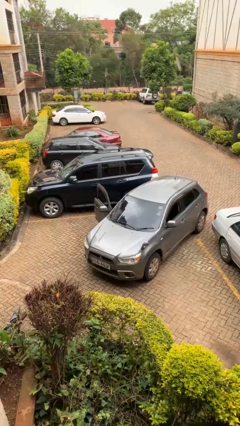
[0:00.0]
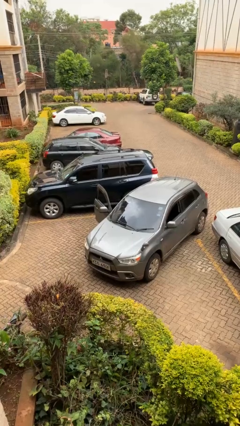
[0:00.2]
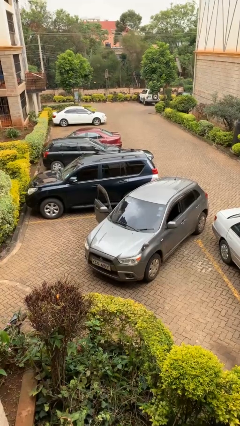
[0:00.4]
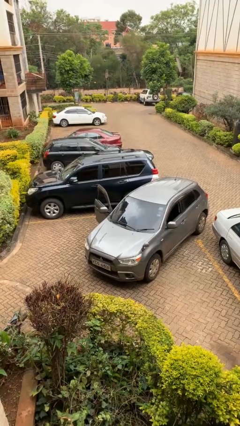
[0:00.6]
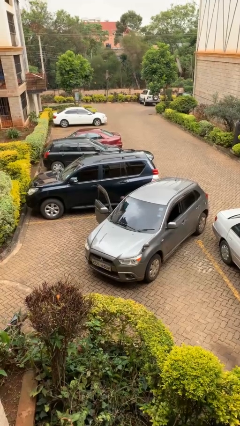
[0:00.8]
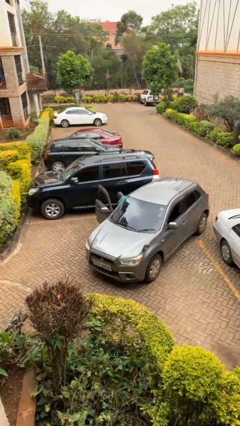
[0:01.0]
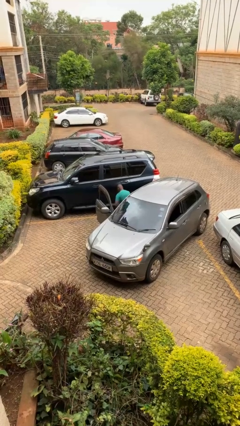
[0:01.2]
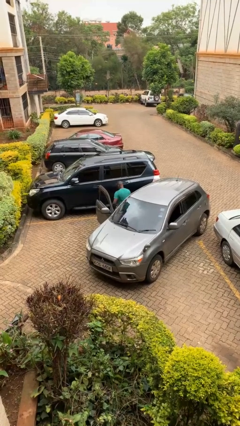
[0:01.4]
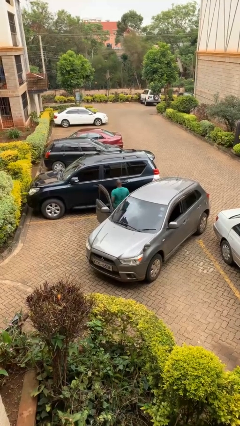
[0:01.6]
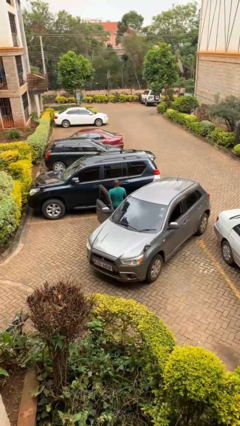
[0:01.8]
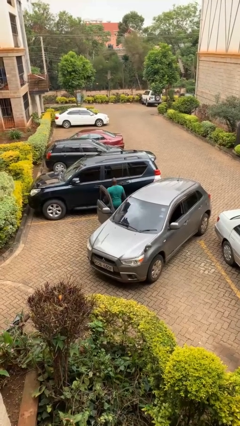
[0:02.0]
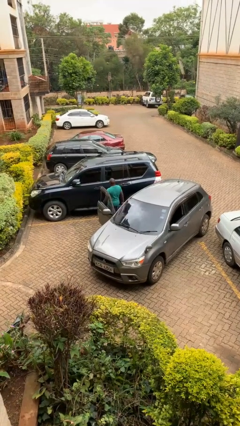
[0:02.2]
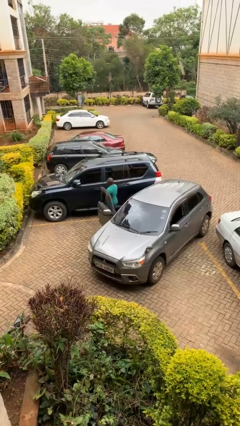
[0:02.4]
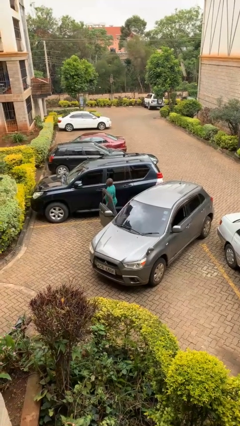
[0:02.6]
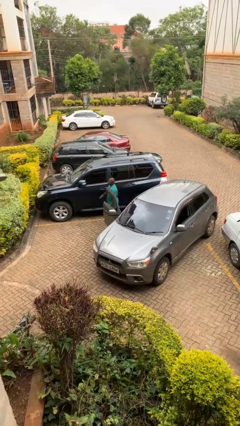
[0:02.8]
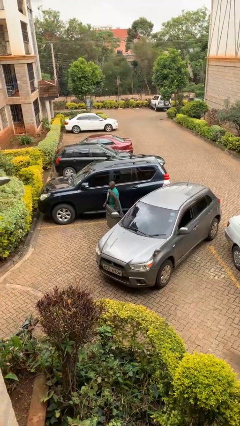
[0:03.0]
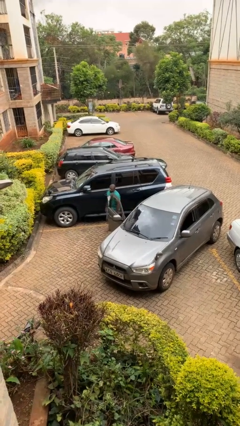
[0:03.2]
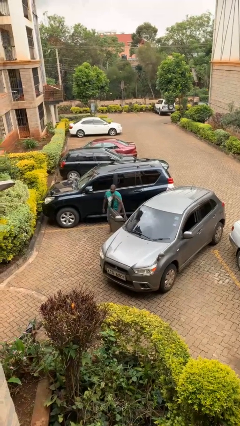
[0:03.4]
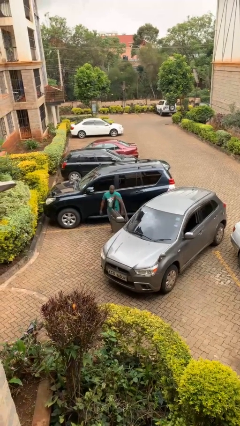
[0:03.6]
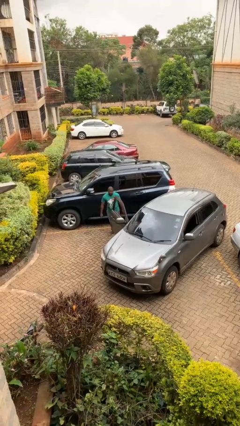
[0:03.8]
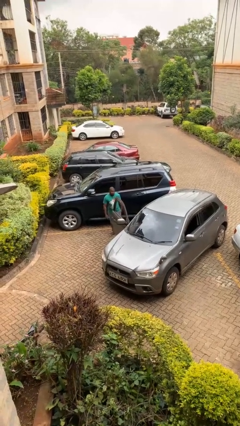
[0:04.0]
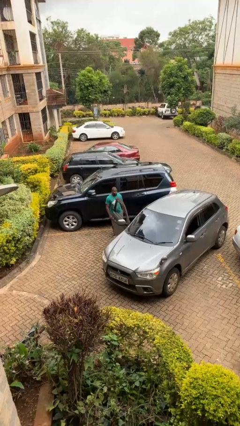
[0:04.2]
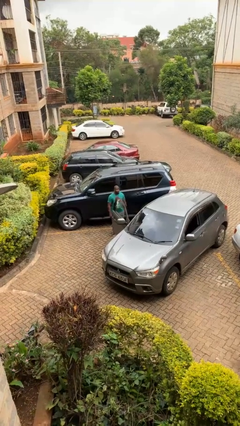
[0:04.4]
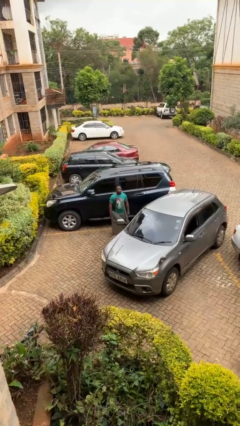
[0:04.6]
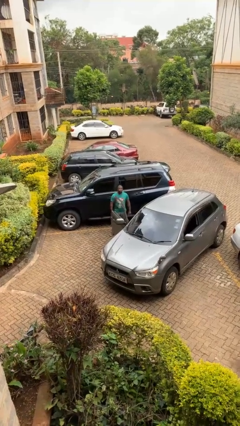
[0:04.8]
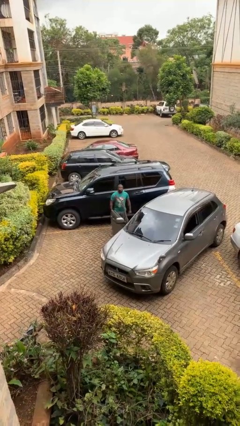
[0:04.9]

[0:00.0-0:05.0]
person exits car

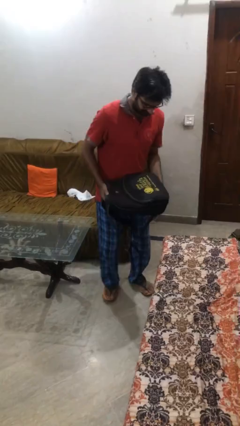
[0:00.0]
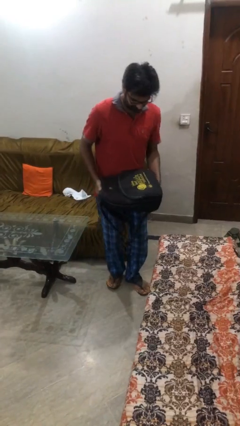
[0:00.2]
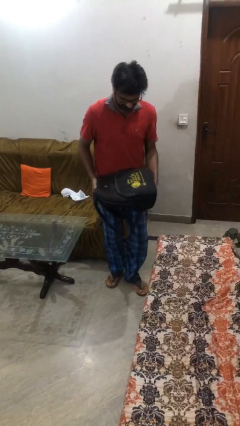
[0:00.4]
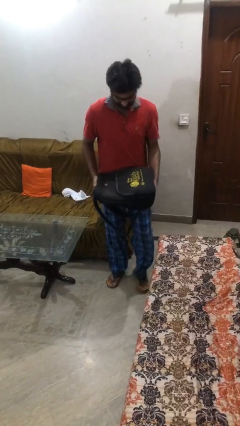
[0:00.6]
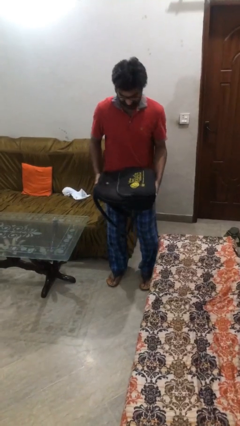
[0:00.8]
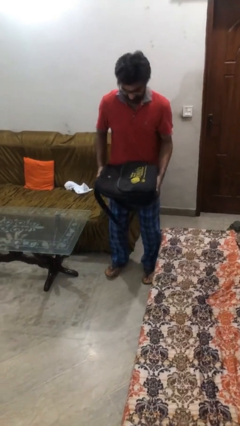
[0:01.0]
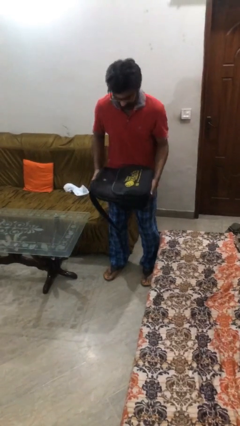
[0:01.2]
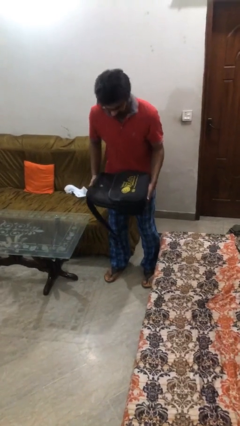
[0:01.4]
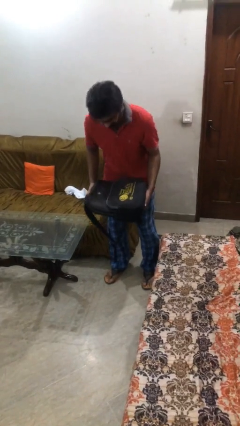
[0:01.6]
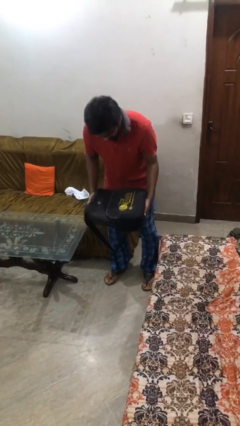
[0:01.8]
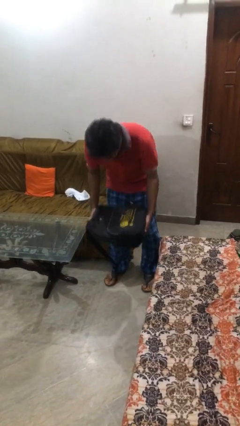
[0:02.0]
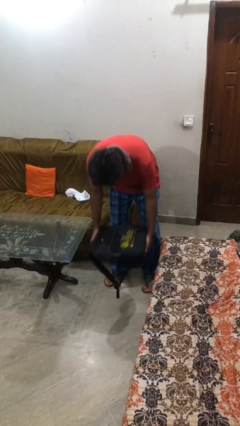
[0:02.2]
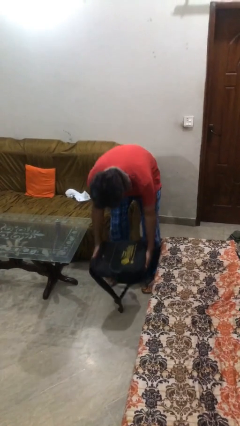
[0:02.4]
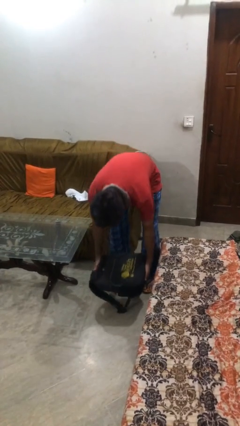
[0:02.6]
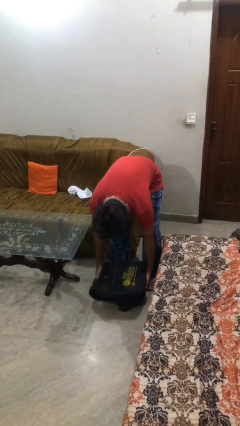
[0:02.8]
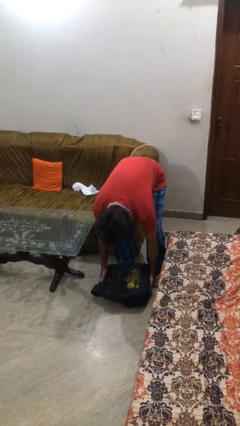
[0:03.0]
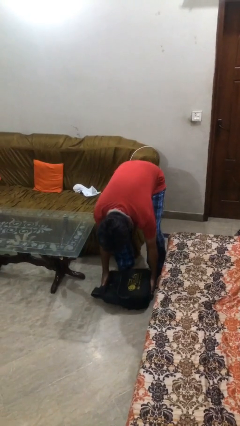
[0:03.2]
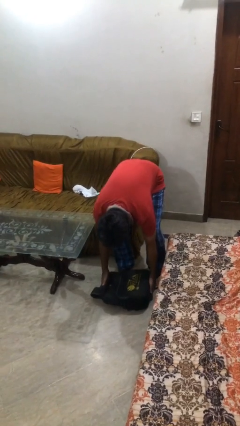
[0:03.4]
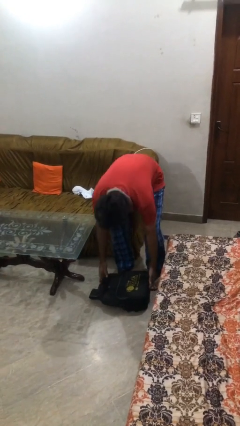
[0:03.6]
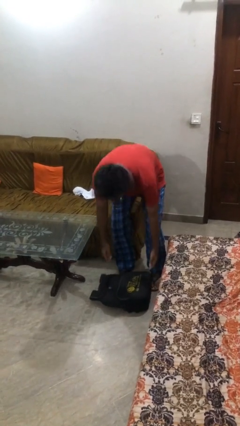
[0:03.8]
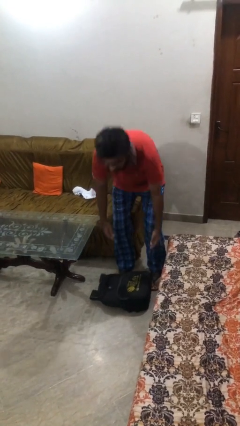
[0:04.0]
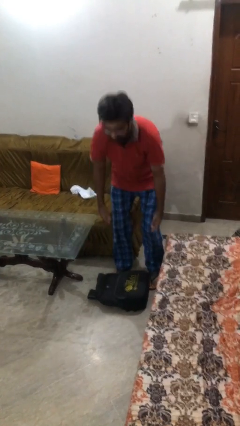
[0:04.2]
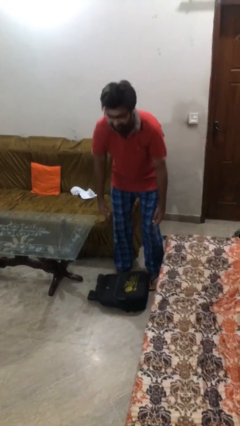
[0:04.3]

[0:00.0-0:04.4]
person puts down object on floor

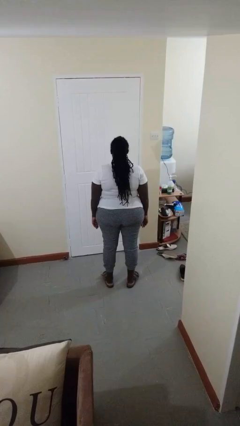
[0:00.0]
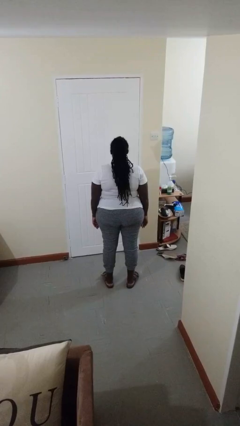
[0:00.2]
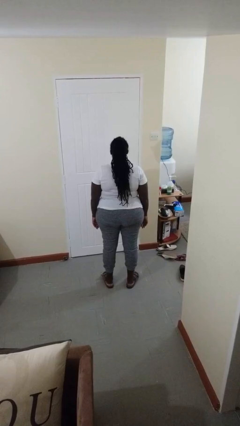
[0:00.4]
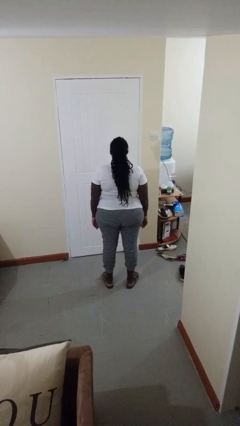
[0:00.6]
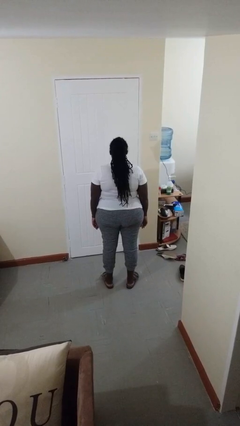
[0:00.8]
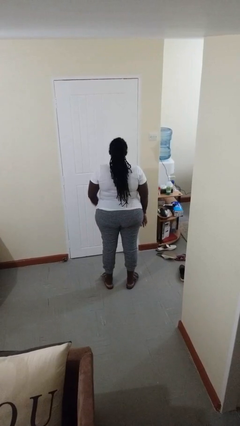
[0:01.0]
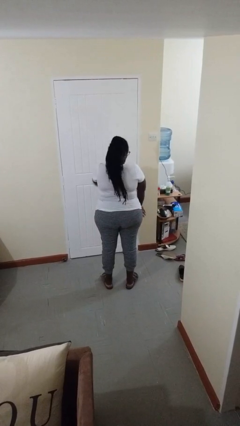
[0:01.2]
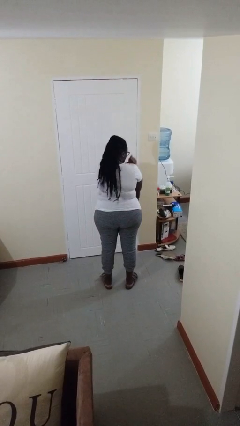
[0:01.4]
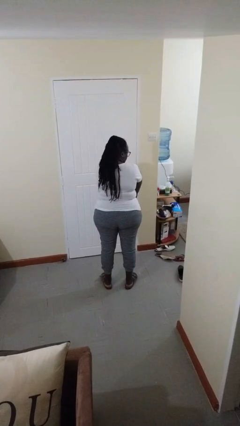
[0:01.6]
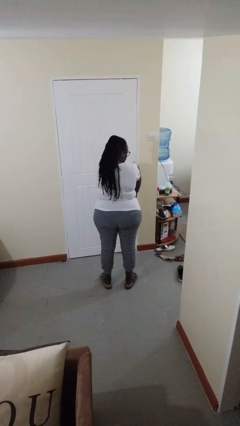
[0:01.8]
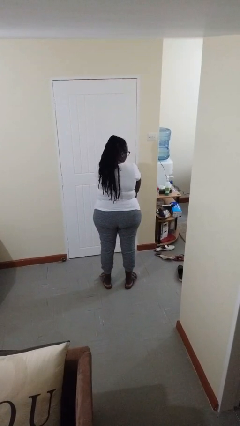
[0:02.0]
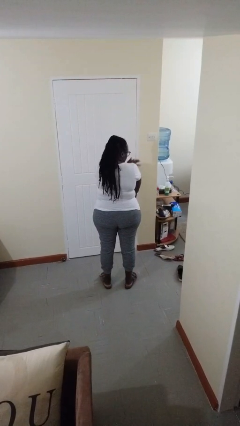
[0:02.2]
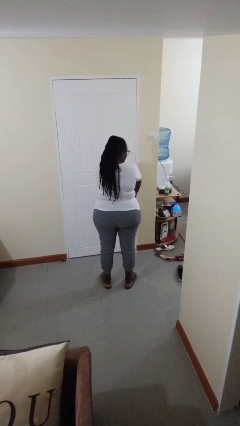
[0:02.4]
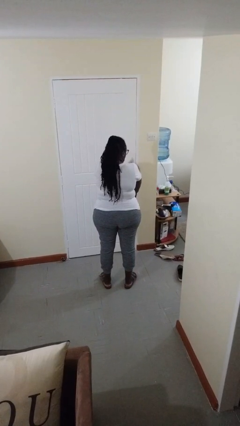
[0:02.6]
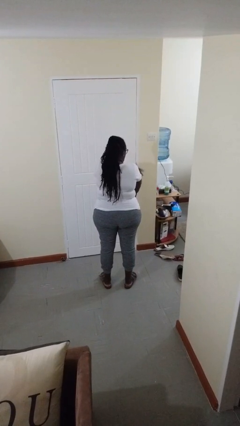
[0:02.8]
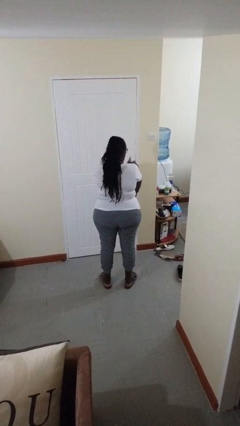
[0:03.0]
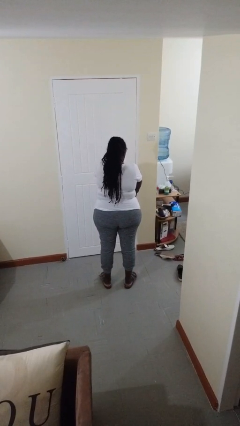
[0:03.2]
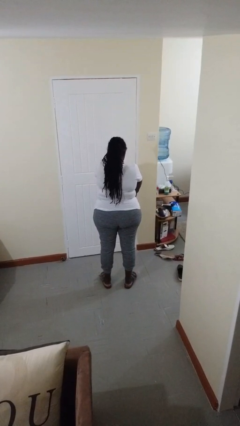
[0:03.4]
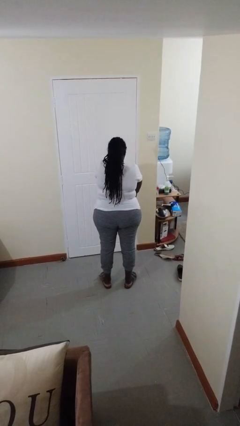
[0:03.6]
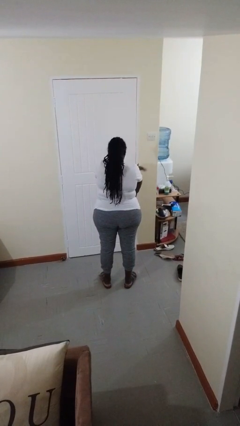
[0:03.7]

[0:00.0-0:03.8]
person swats bug

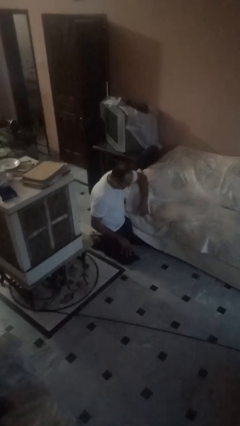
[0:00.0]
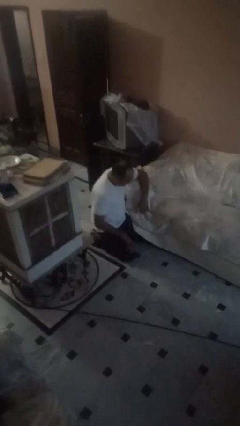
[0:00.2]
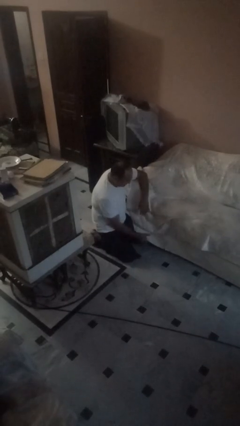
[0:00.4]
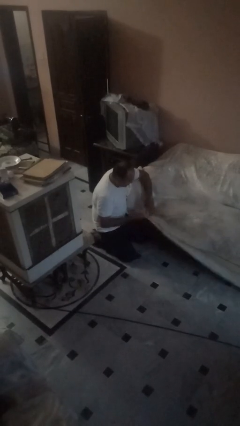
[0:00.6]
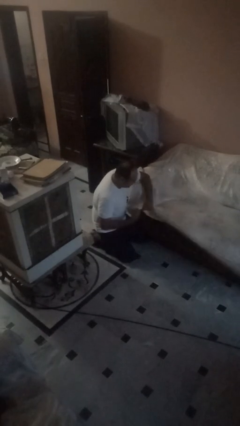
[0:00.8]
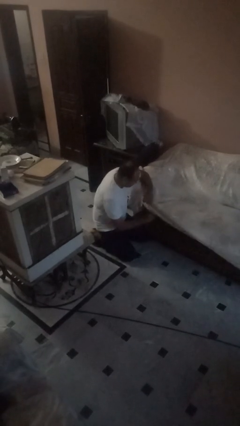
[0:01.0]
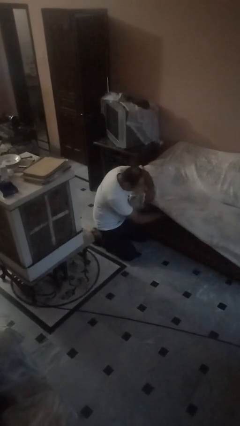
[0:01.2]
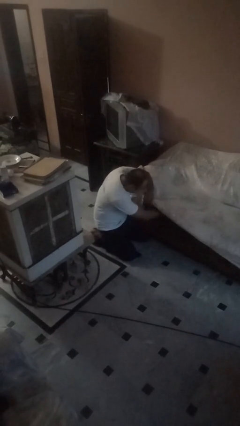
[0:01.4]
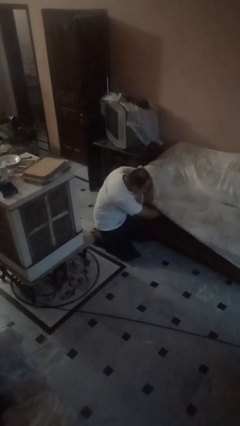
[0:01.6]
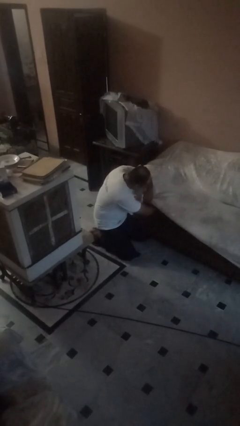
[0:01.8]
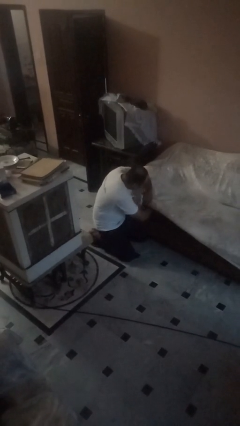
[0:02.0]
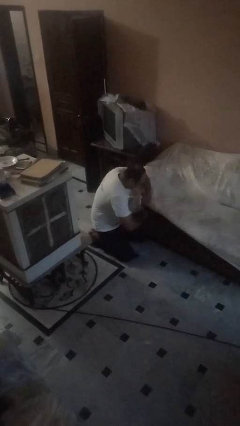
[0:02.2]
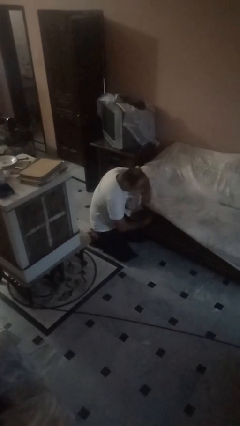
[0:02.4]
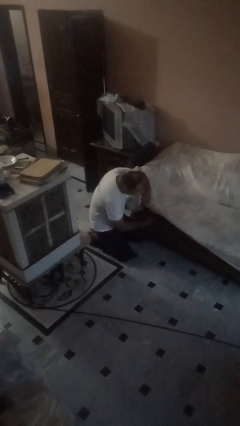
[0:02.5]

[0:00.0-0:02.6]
person searches in couch

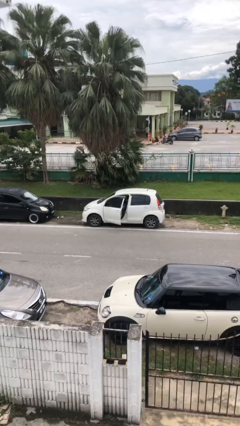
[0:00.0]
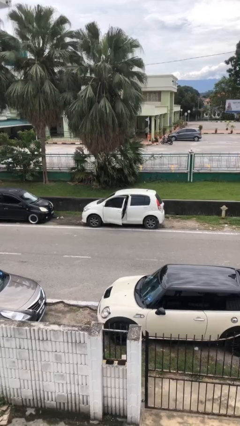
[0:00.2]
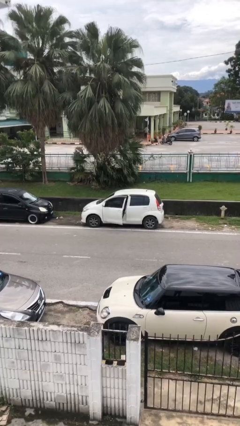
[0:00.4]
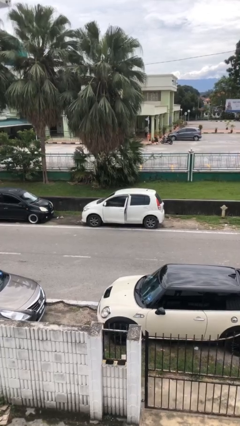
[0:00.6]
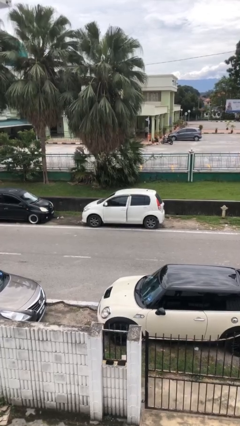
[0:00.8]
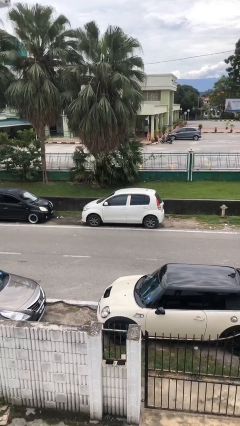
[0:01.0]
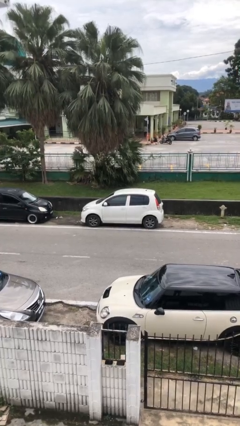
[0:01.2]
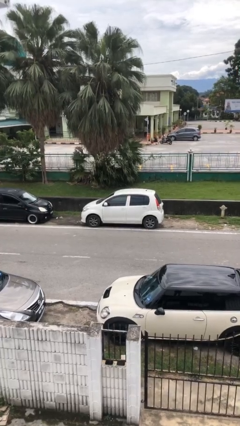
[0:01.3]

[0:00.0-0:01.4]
person closes car door
